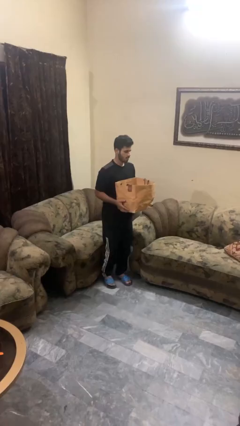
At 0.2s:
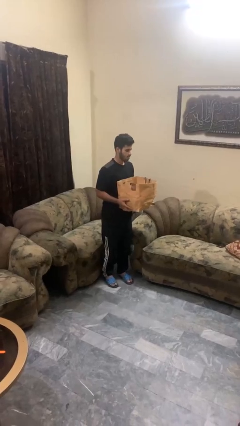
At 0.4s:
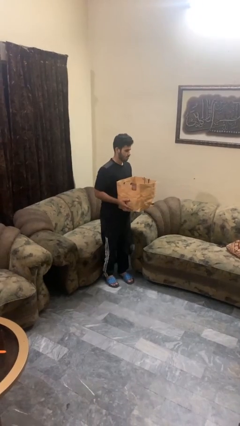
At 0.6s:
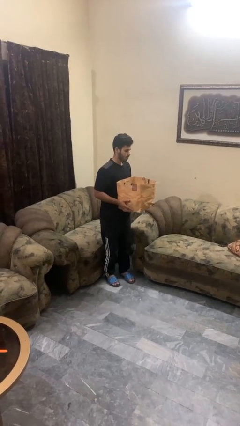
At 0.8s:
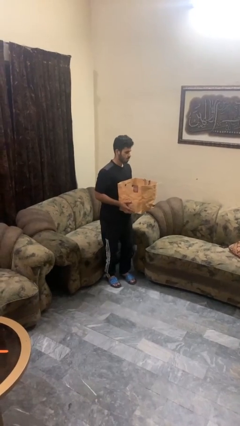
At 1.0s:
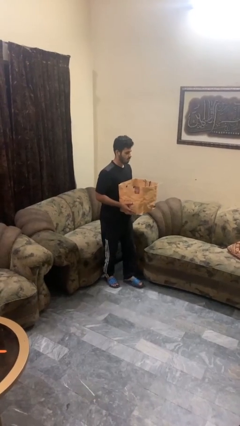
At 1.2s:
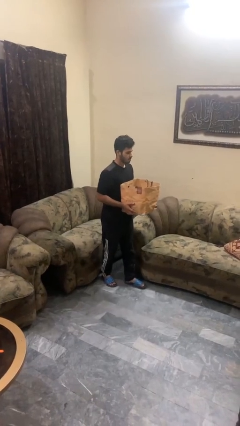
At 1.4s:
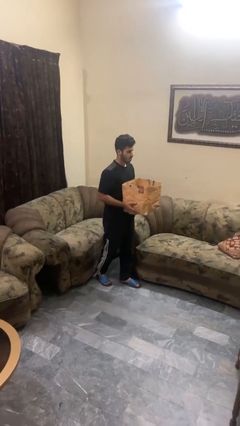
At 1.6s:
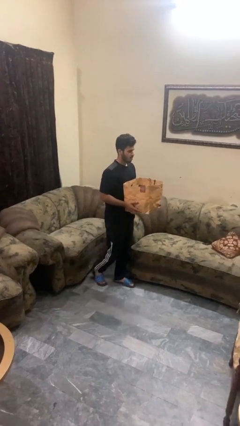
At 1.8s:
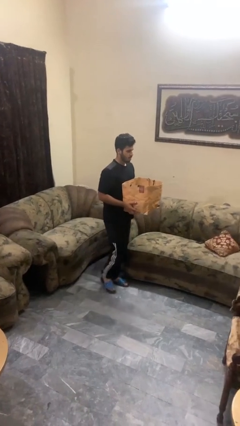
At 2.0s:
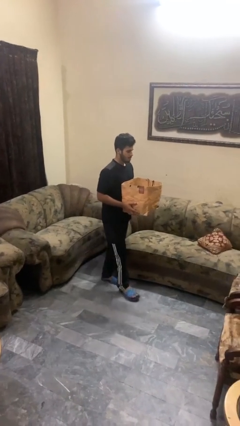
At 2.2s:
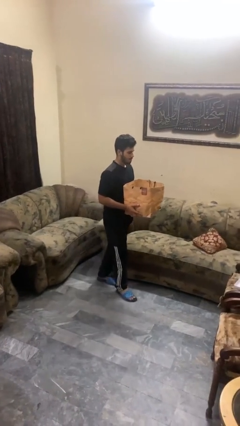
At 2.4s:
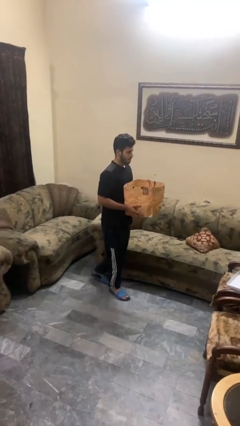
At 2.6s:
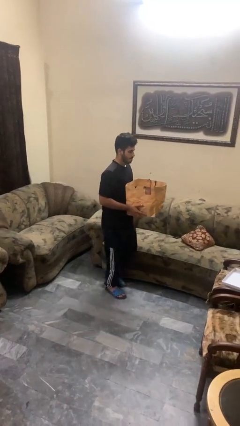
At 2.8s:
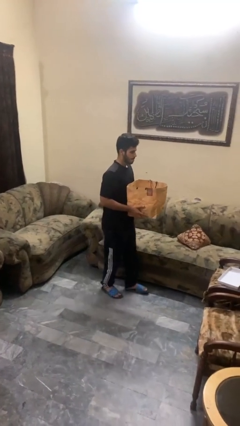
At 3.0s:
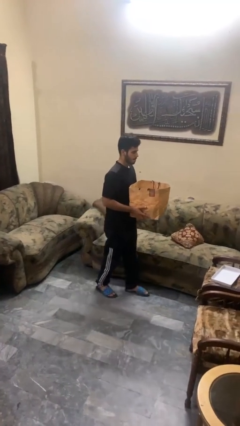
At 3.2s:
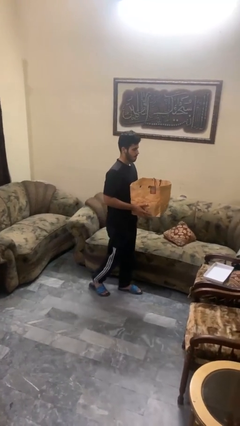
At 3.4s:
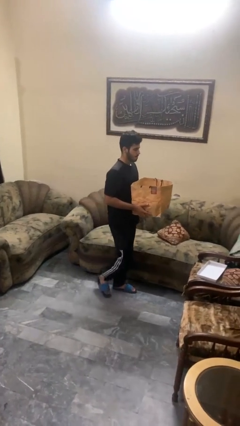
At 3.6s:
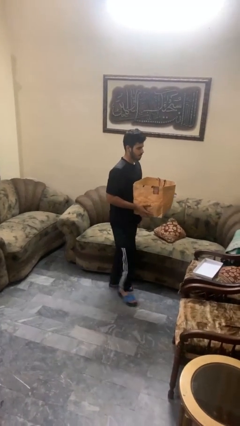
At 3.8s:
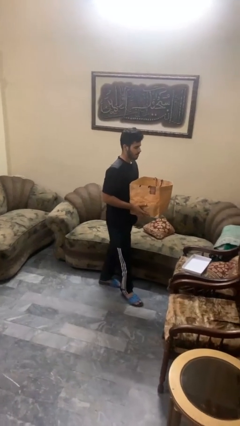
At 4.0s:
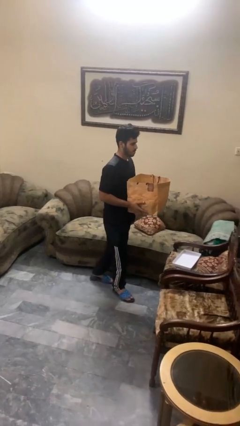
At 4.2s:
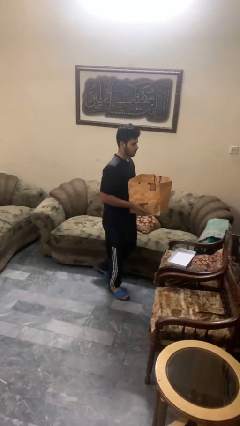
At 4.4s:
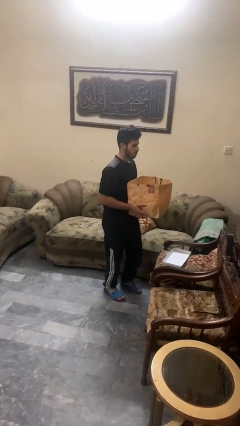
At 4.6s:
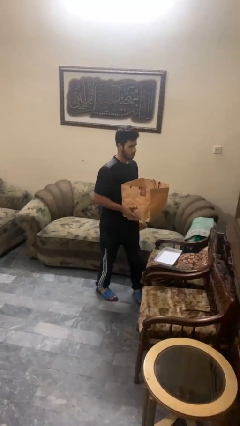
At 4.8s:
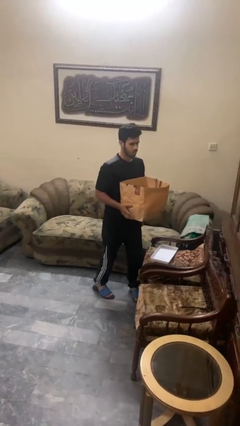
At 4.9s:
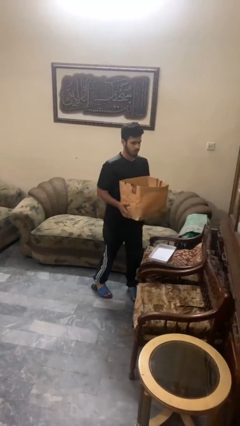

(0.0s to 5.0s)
person carries groceries

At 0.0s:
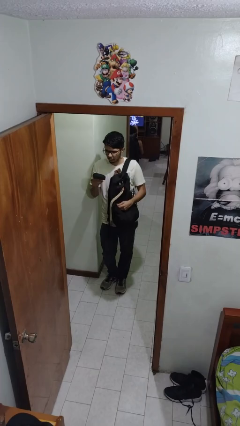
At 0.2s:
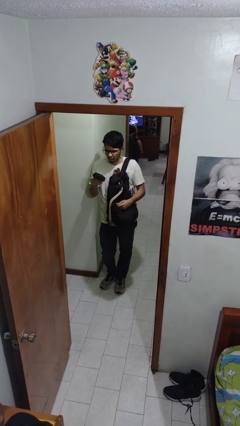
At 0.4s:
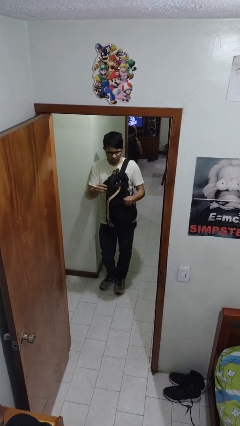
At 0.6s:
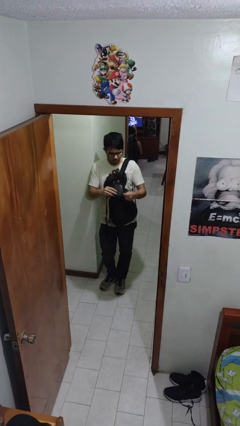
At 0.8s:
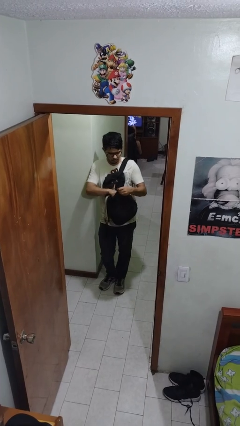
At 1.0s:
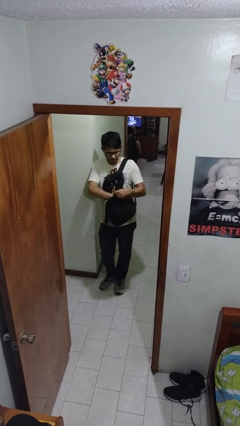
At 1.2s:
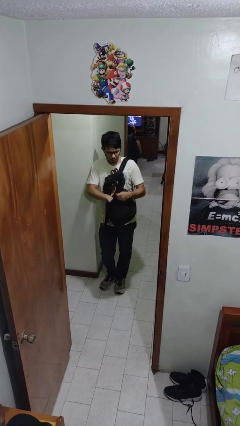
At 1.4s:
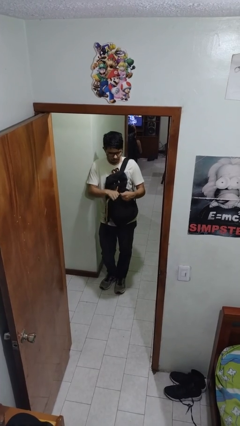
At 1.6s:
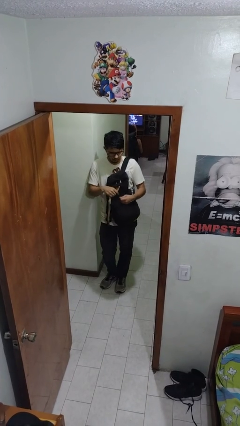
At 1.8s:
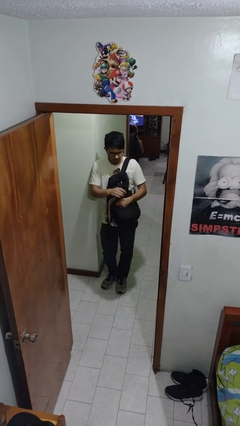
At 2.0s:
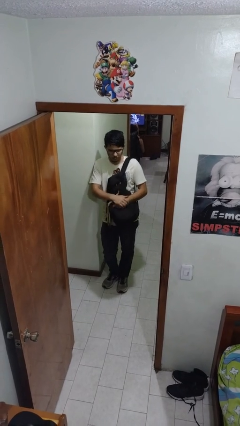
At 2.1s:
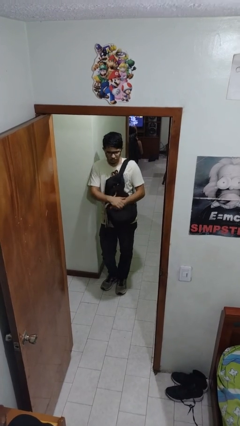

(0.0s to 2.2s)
person puts object into backpack

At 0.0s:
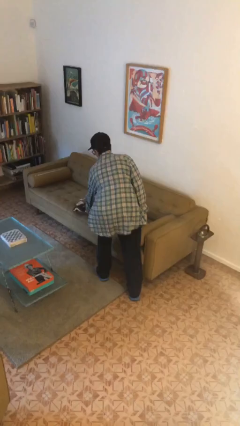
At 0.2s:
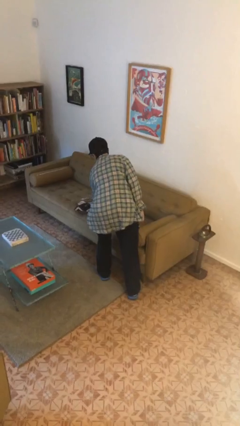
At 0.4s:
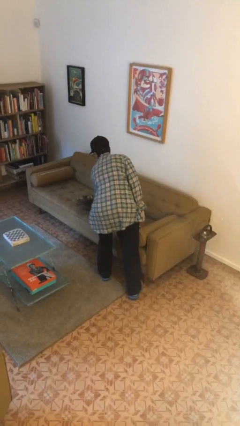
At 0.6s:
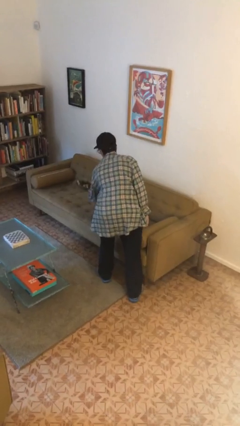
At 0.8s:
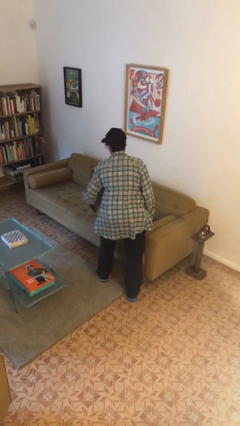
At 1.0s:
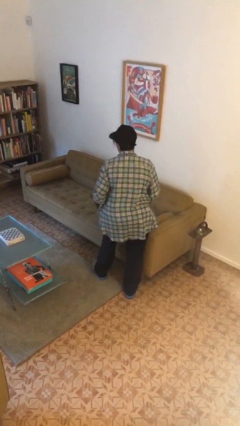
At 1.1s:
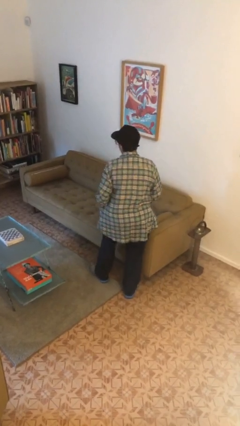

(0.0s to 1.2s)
person picks up object from couch

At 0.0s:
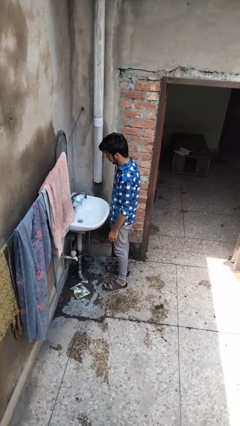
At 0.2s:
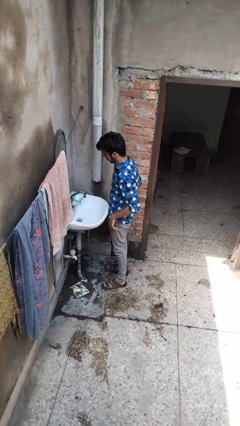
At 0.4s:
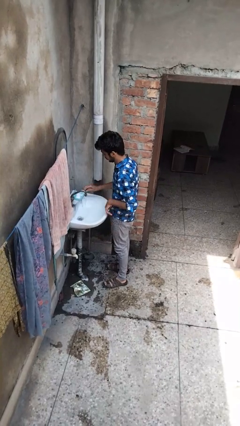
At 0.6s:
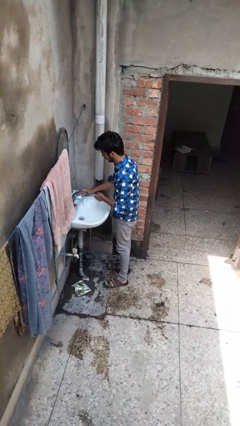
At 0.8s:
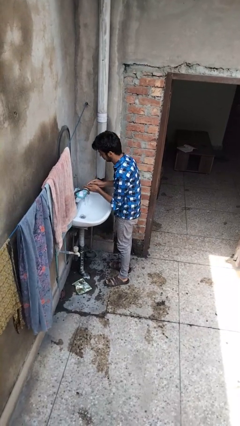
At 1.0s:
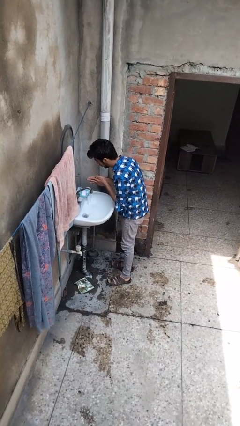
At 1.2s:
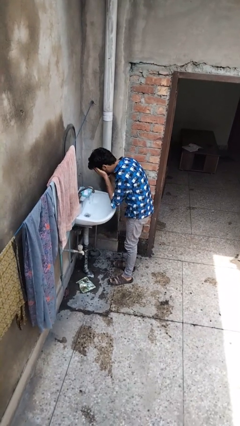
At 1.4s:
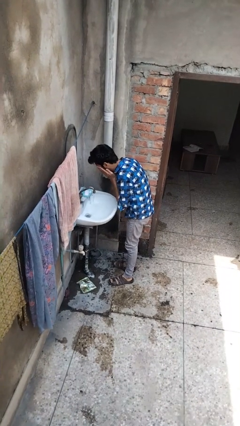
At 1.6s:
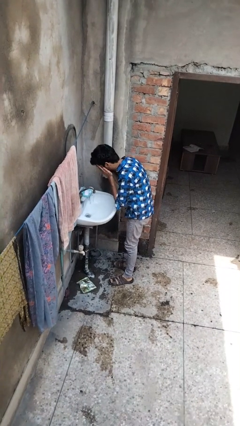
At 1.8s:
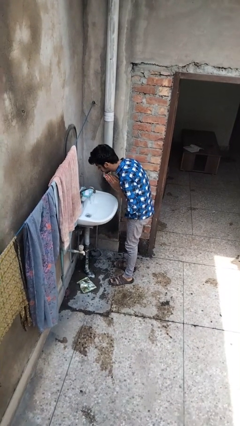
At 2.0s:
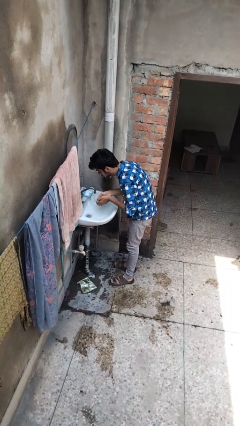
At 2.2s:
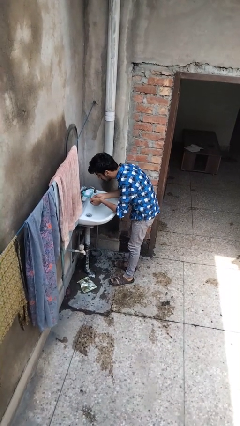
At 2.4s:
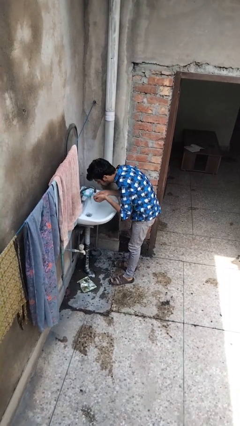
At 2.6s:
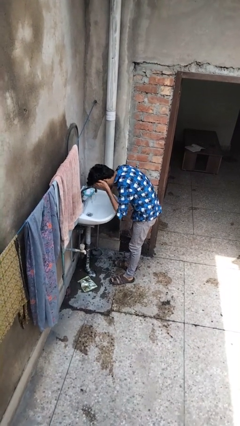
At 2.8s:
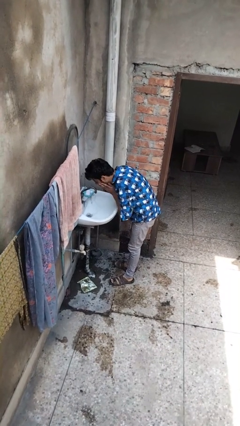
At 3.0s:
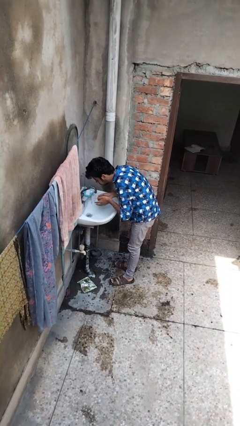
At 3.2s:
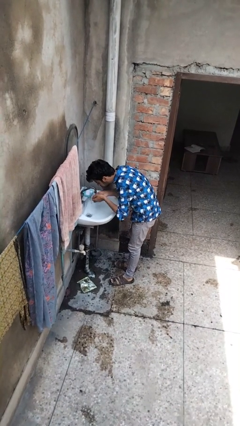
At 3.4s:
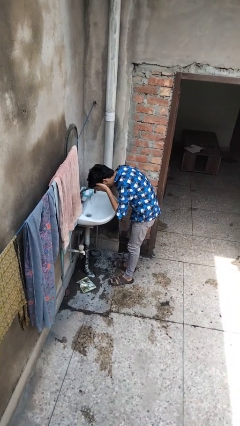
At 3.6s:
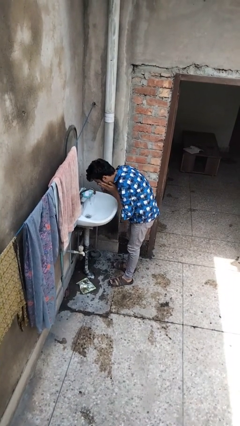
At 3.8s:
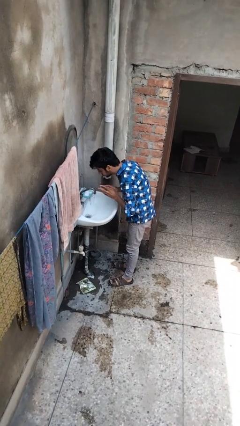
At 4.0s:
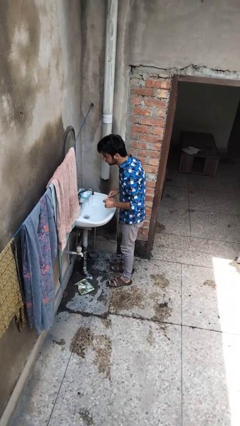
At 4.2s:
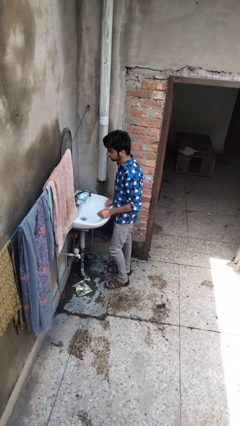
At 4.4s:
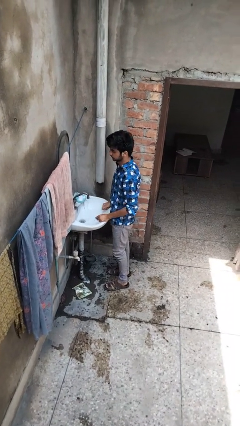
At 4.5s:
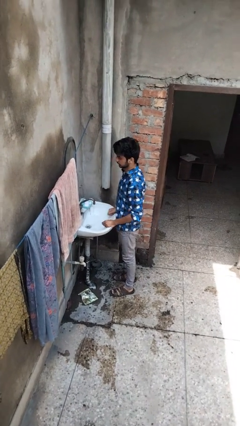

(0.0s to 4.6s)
person washes face

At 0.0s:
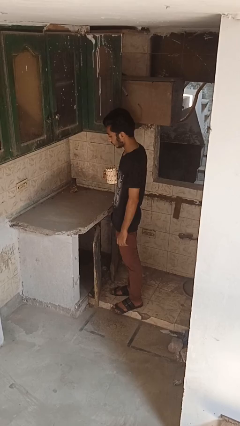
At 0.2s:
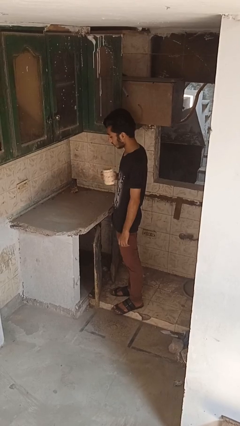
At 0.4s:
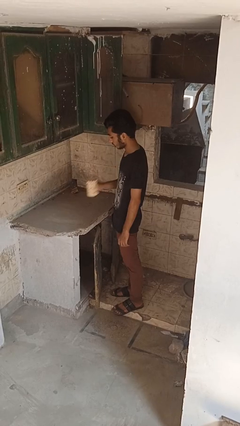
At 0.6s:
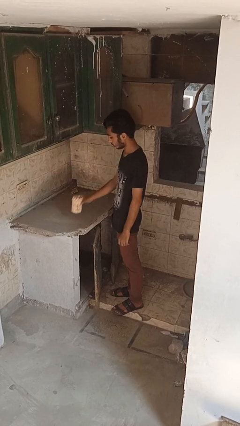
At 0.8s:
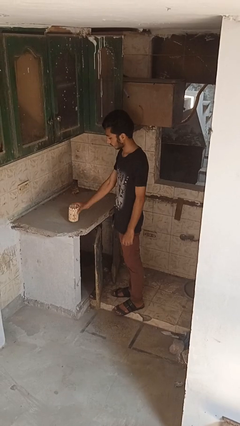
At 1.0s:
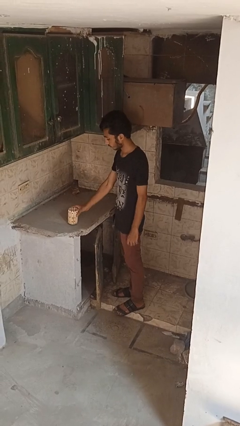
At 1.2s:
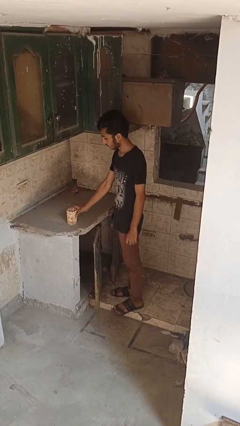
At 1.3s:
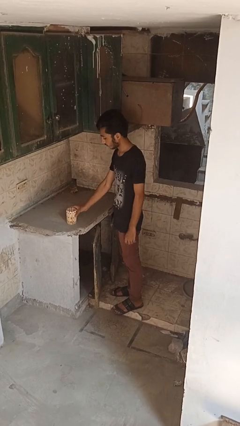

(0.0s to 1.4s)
person puts down object on countertop

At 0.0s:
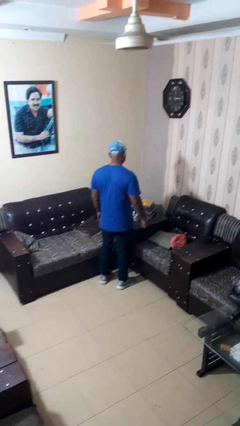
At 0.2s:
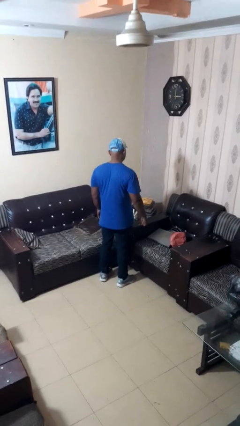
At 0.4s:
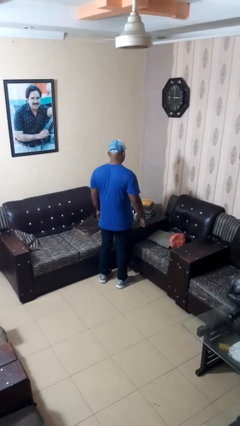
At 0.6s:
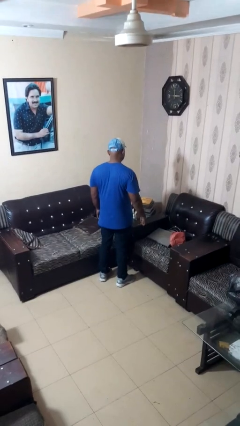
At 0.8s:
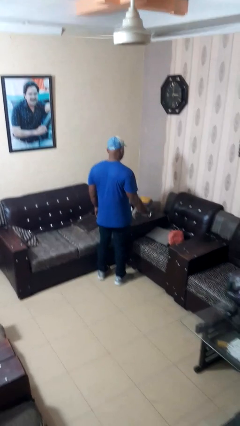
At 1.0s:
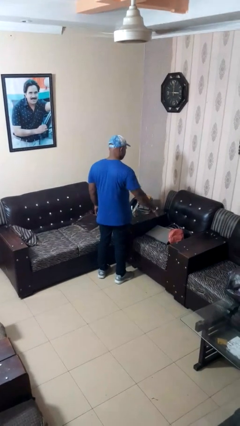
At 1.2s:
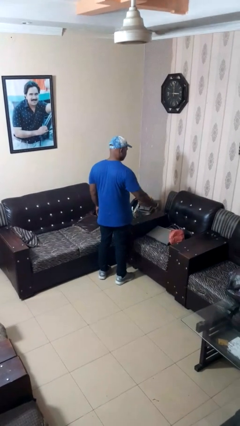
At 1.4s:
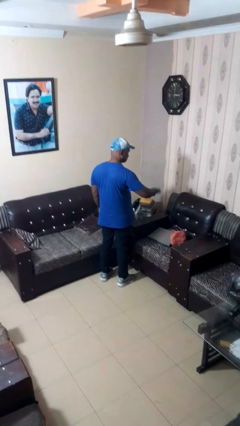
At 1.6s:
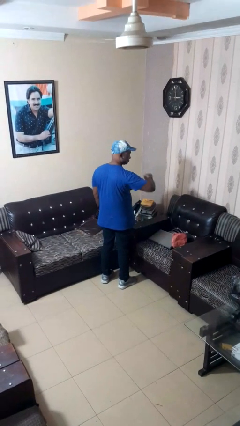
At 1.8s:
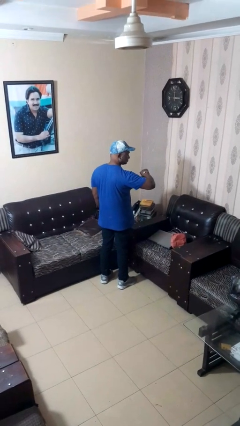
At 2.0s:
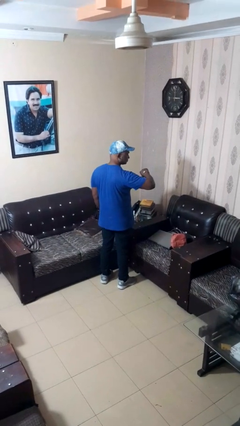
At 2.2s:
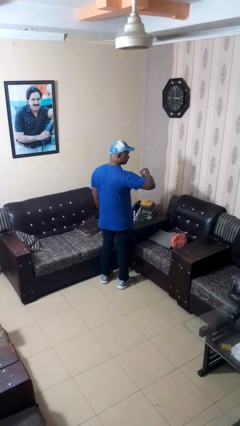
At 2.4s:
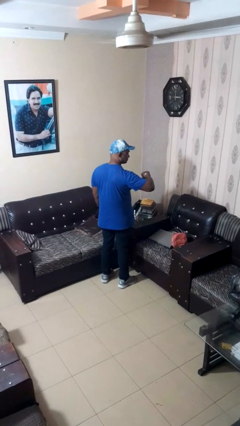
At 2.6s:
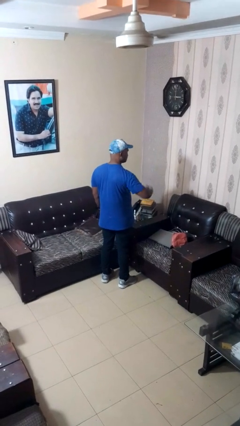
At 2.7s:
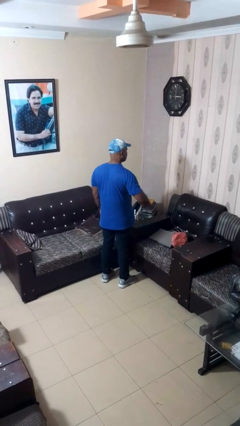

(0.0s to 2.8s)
person looks at wristwatch

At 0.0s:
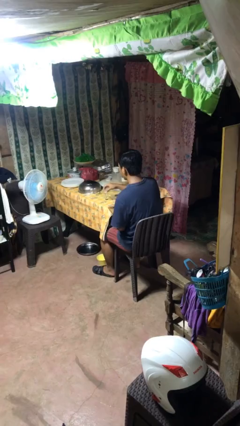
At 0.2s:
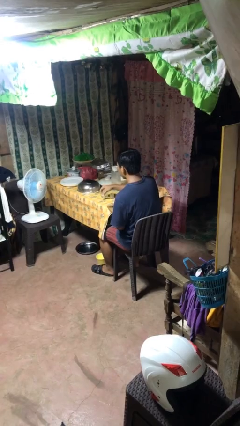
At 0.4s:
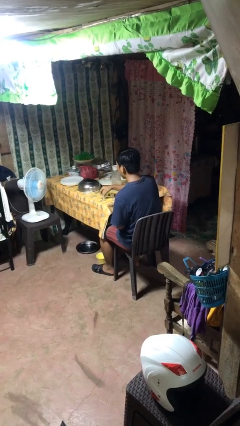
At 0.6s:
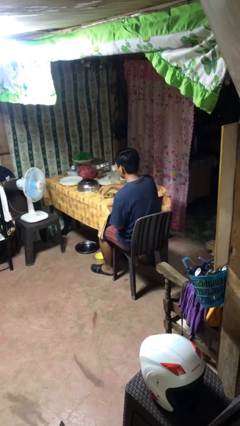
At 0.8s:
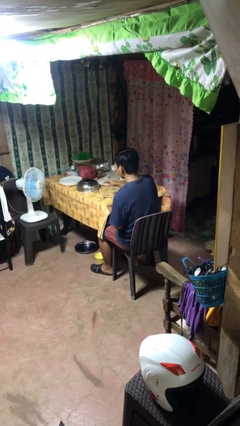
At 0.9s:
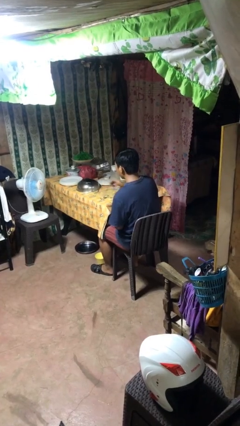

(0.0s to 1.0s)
person puts down object on table
